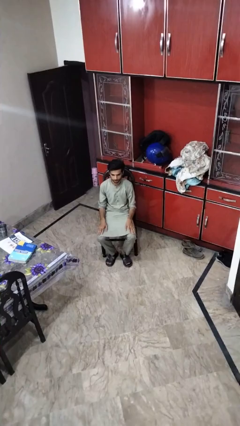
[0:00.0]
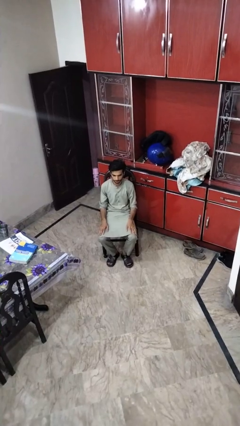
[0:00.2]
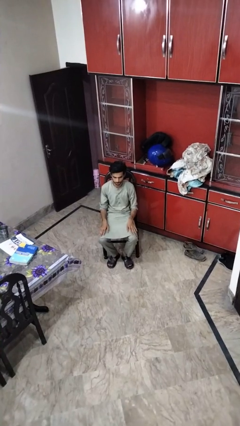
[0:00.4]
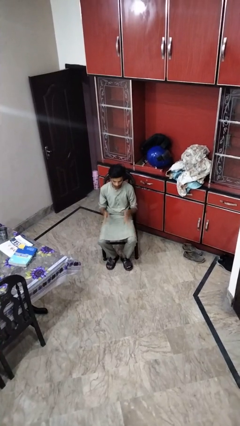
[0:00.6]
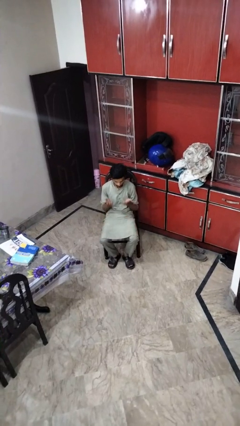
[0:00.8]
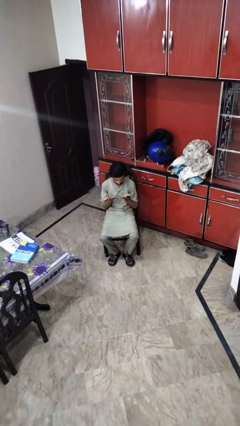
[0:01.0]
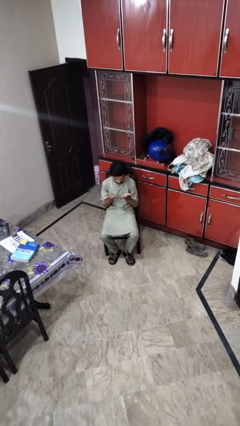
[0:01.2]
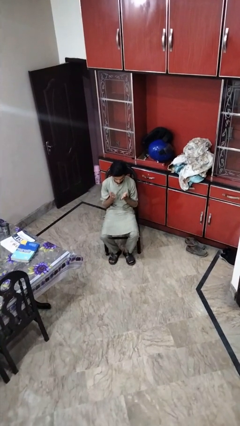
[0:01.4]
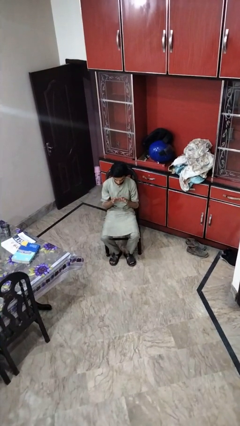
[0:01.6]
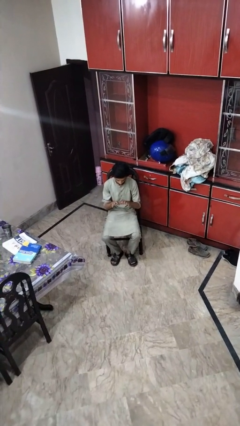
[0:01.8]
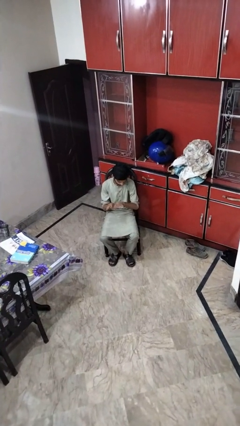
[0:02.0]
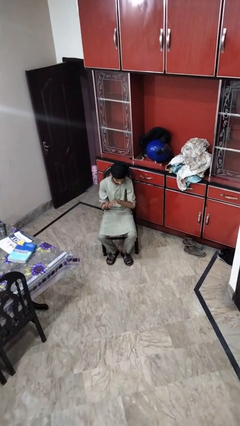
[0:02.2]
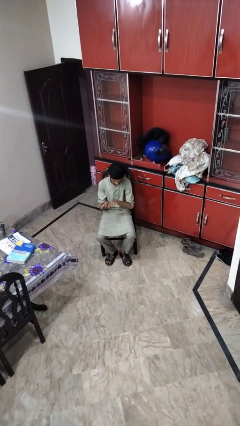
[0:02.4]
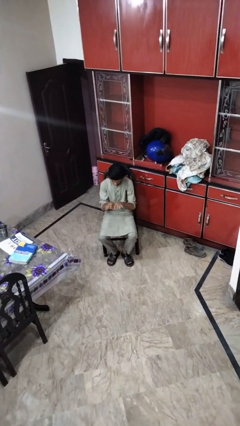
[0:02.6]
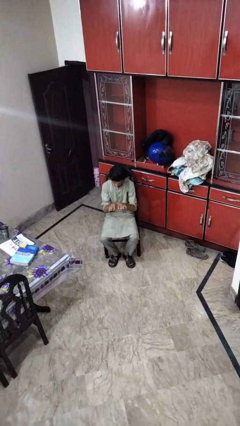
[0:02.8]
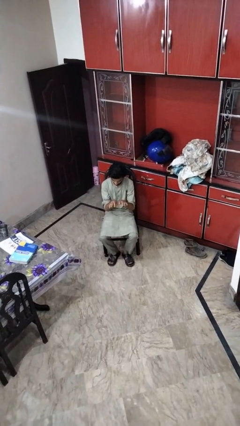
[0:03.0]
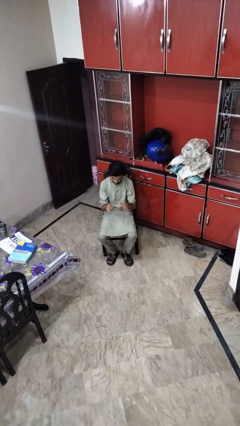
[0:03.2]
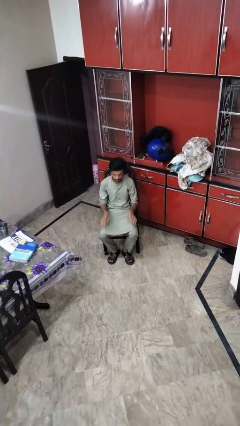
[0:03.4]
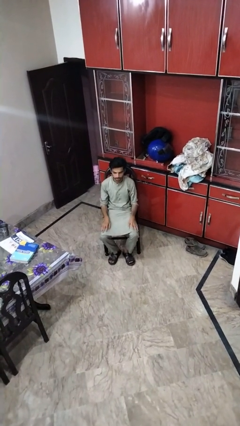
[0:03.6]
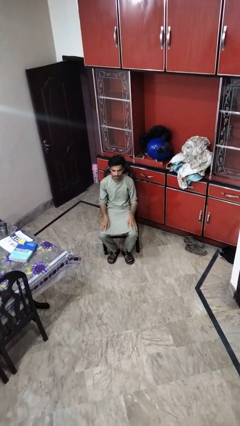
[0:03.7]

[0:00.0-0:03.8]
person looks at hands in lap

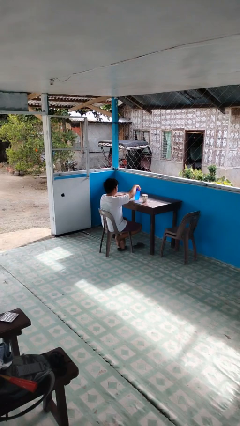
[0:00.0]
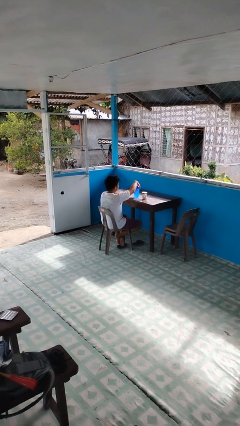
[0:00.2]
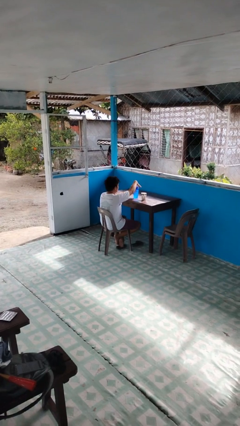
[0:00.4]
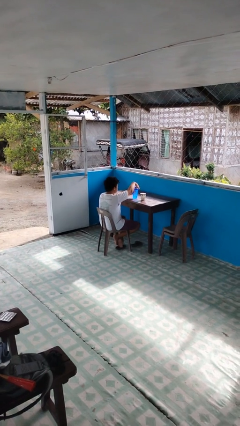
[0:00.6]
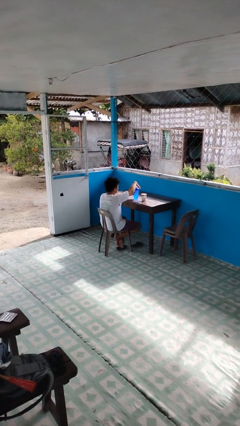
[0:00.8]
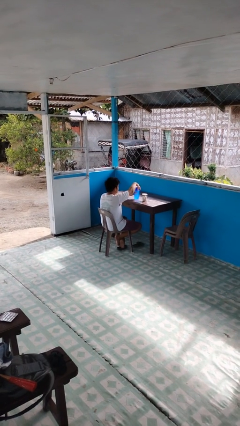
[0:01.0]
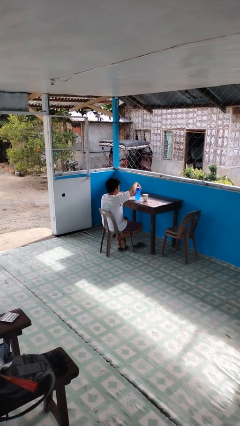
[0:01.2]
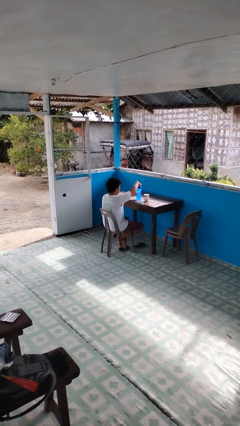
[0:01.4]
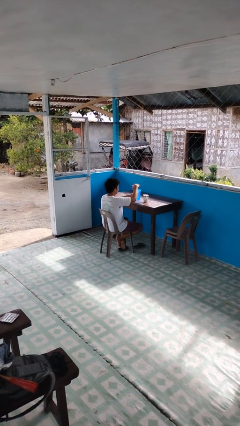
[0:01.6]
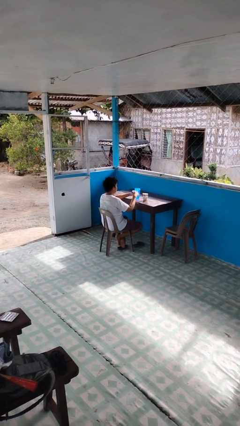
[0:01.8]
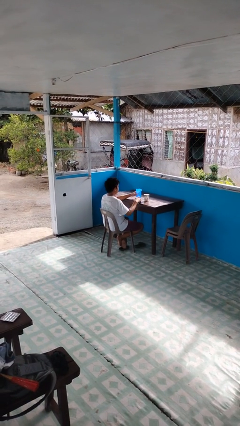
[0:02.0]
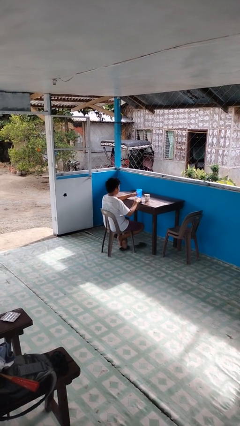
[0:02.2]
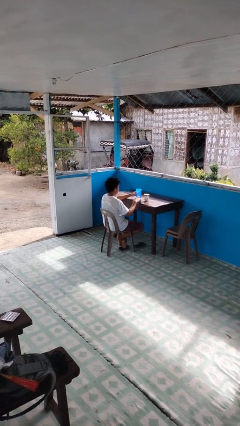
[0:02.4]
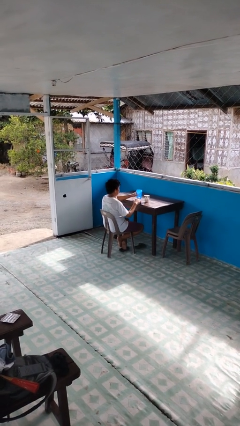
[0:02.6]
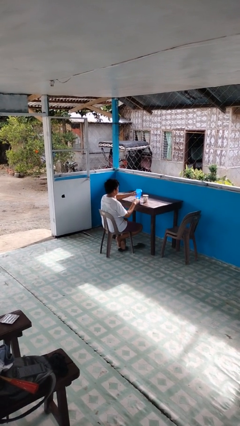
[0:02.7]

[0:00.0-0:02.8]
person unscrews lid from bottle

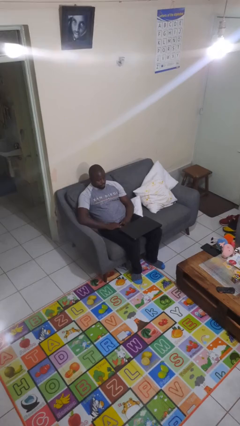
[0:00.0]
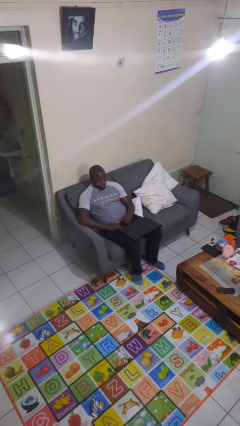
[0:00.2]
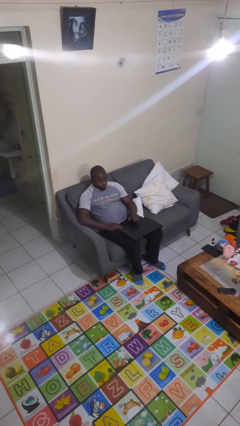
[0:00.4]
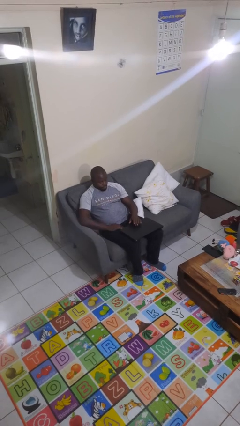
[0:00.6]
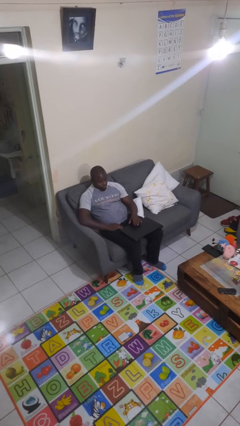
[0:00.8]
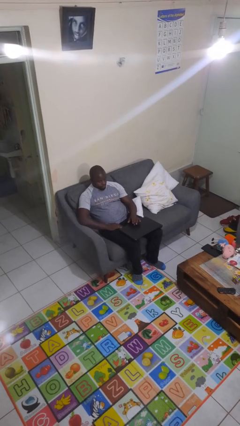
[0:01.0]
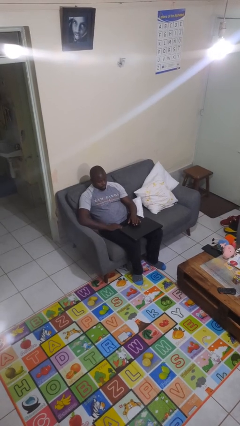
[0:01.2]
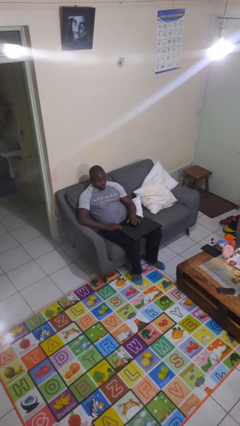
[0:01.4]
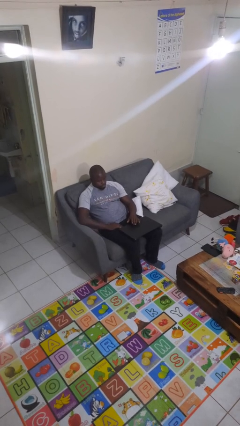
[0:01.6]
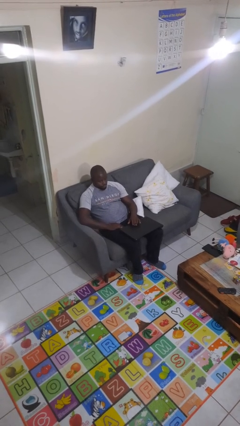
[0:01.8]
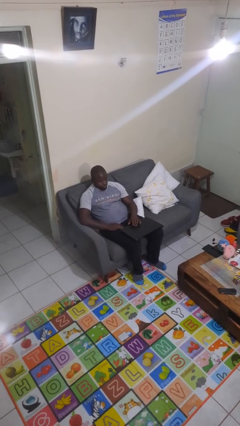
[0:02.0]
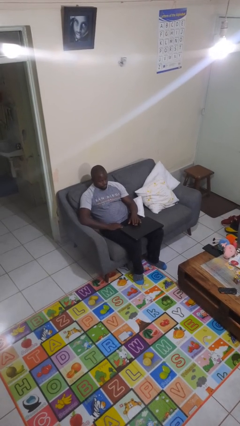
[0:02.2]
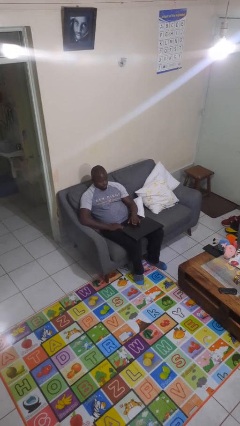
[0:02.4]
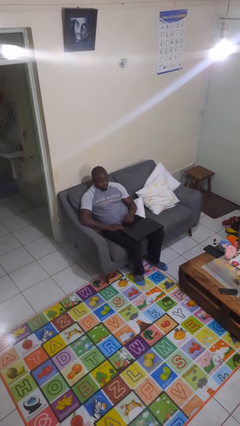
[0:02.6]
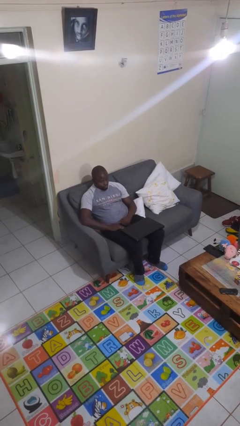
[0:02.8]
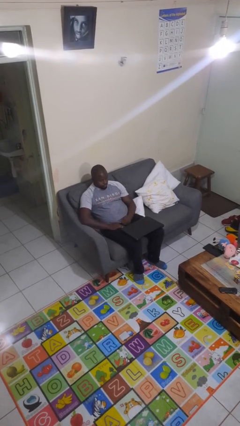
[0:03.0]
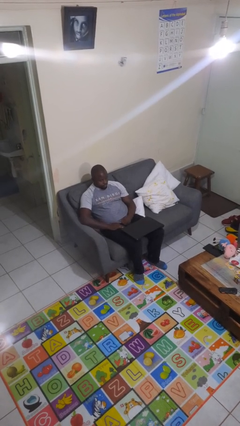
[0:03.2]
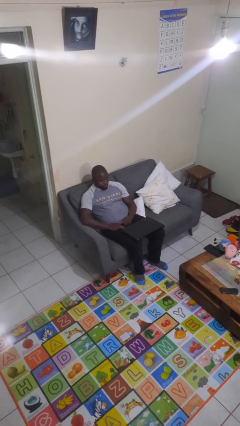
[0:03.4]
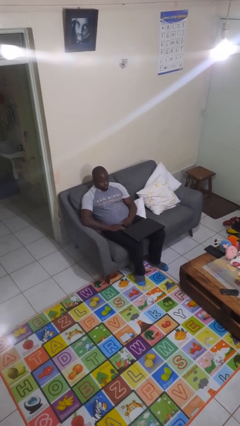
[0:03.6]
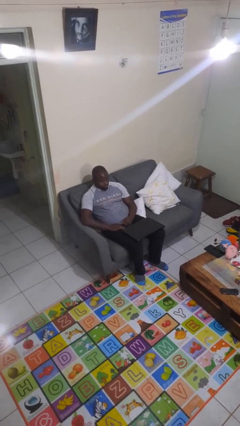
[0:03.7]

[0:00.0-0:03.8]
person taps object with finger

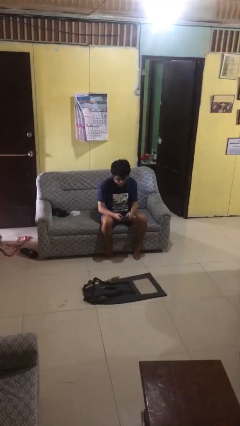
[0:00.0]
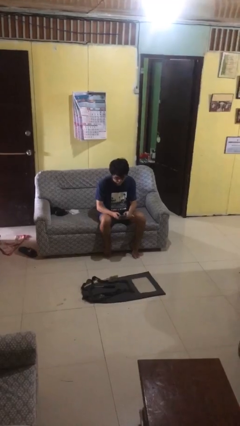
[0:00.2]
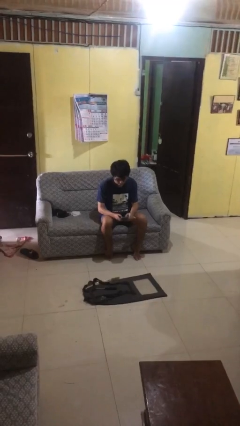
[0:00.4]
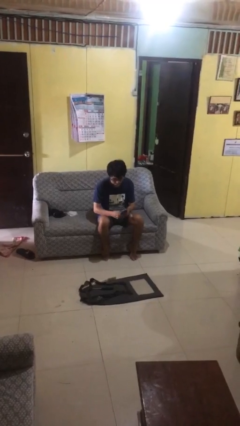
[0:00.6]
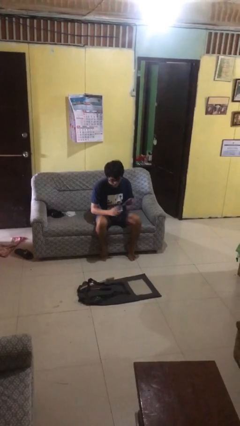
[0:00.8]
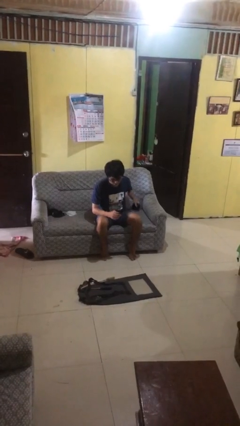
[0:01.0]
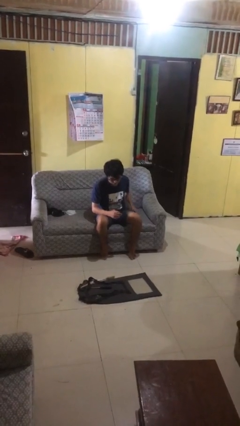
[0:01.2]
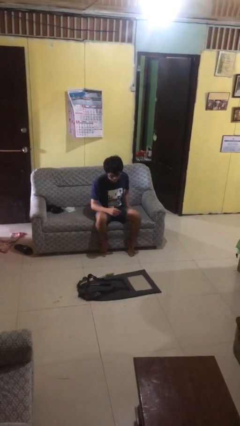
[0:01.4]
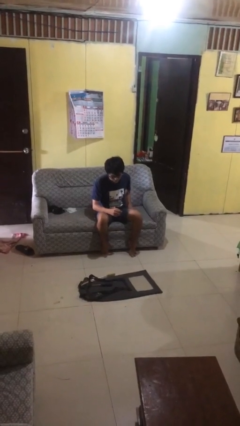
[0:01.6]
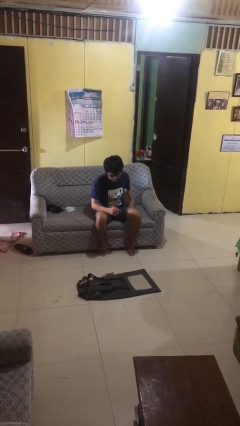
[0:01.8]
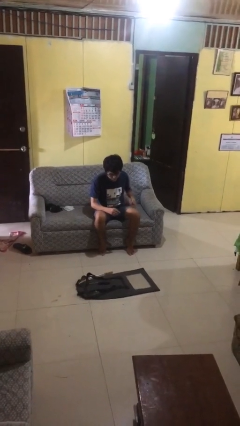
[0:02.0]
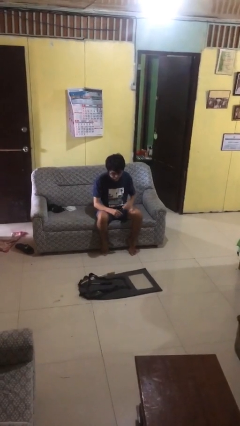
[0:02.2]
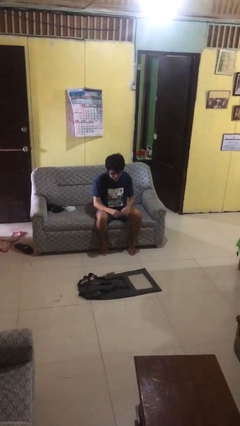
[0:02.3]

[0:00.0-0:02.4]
person puts phone into pocket

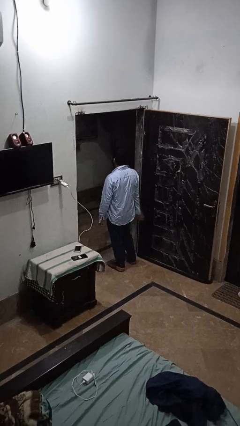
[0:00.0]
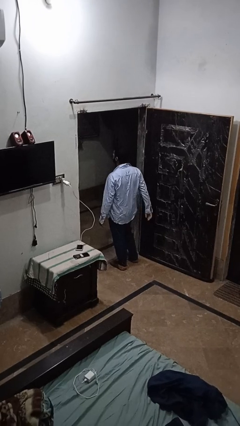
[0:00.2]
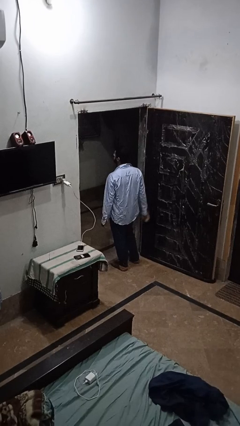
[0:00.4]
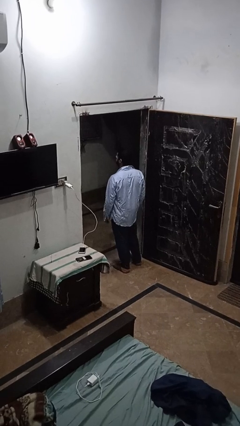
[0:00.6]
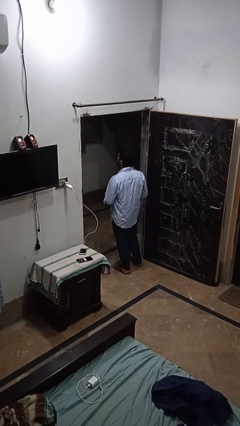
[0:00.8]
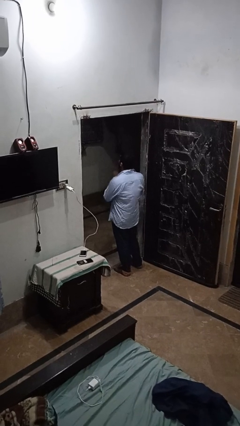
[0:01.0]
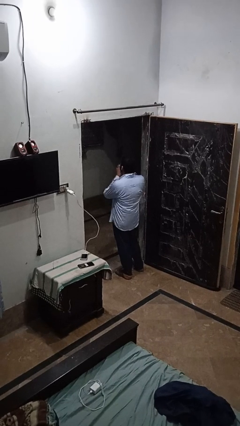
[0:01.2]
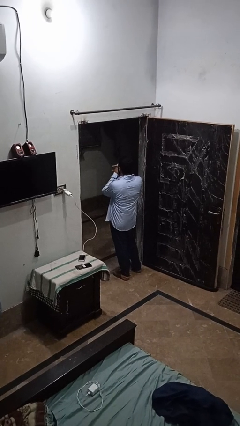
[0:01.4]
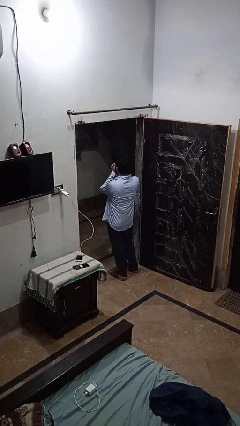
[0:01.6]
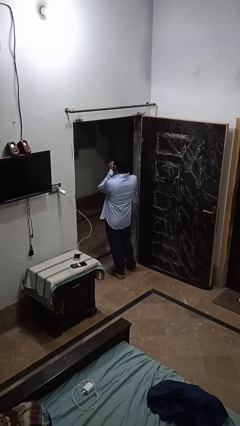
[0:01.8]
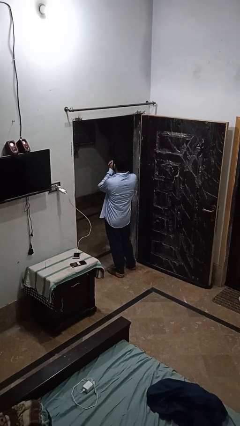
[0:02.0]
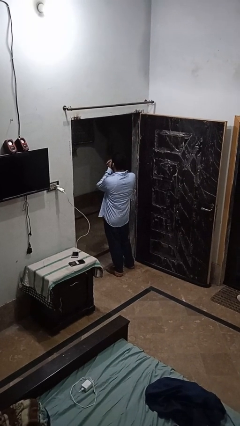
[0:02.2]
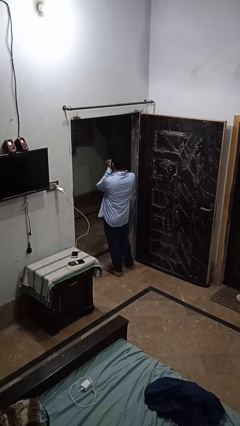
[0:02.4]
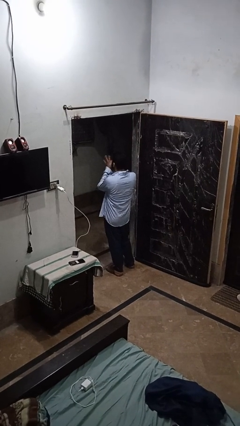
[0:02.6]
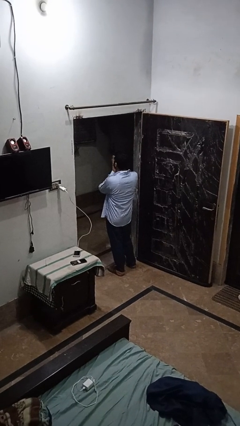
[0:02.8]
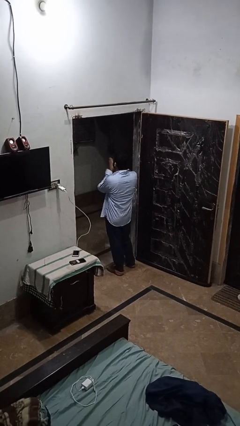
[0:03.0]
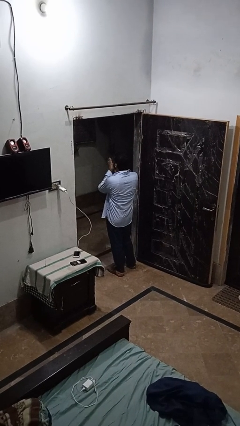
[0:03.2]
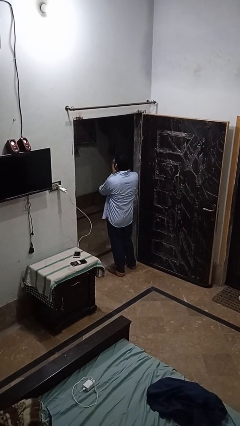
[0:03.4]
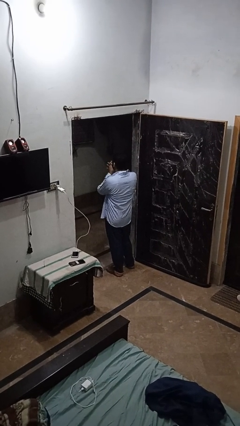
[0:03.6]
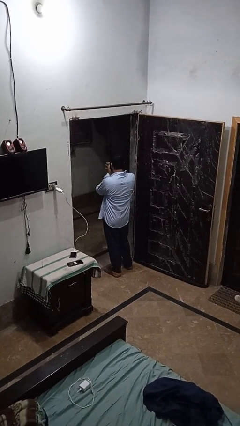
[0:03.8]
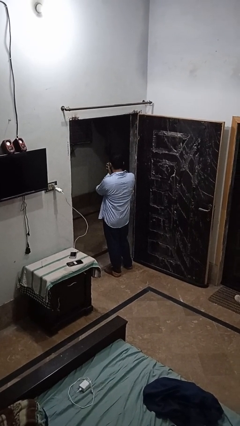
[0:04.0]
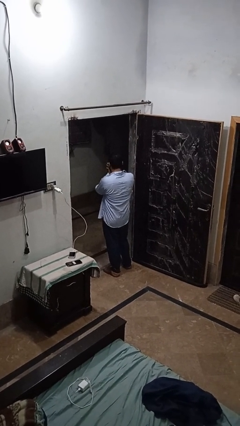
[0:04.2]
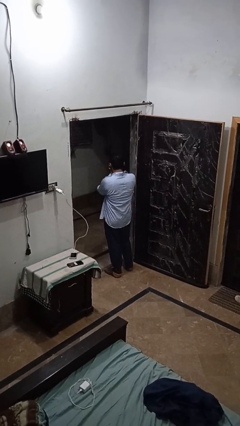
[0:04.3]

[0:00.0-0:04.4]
person blows into hands

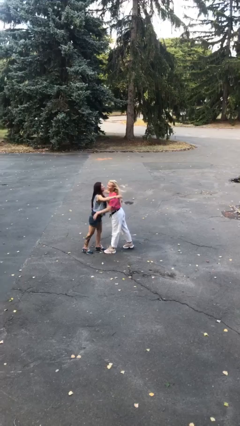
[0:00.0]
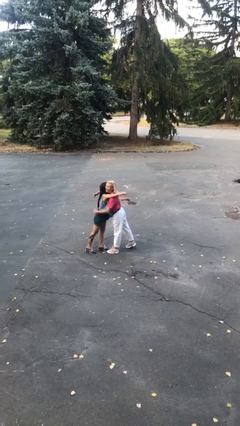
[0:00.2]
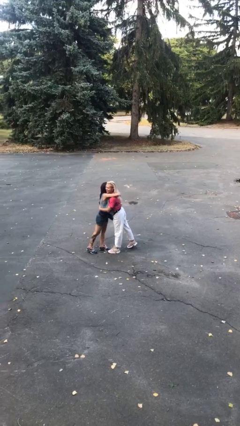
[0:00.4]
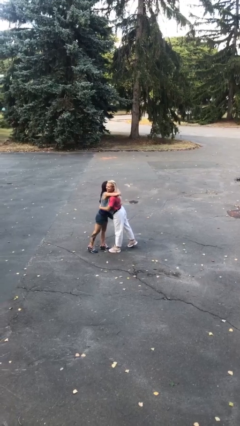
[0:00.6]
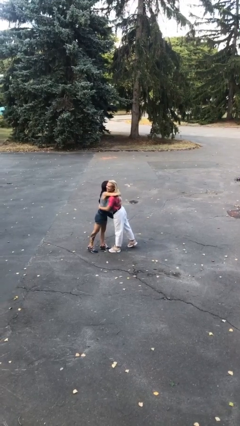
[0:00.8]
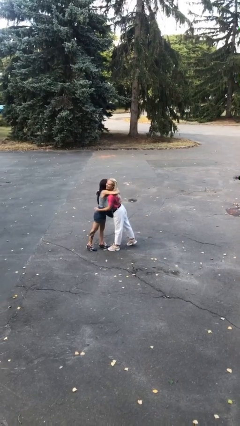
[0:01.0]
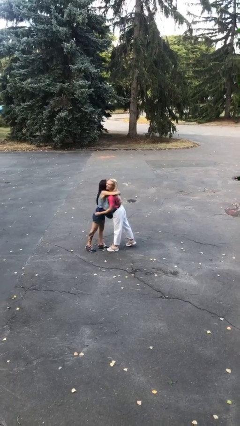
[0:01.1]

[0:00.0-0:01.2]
person embraces person
